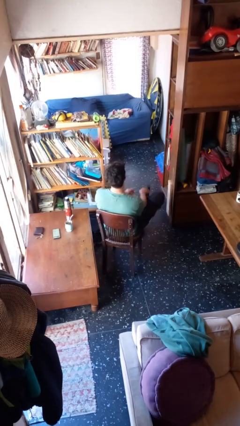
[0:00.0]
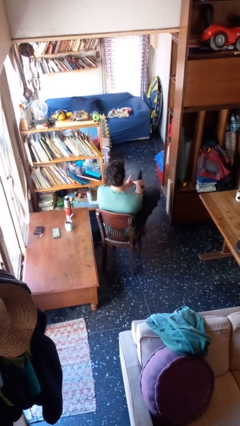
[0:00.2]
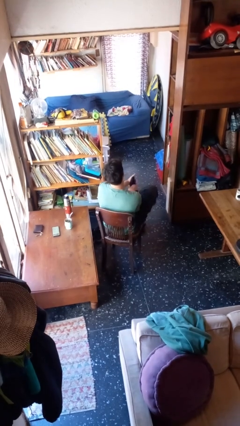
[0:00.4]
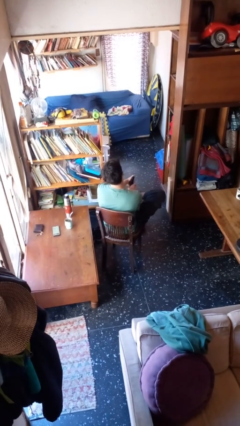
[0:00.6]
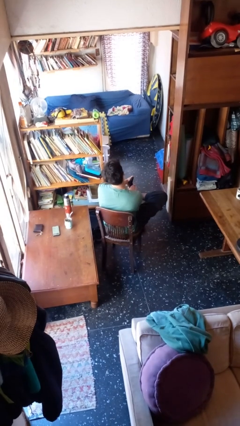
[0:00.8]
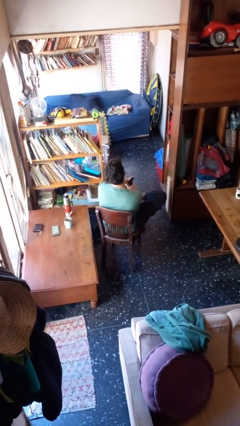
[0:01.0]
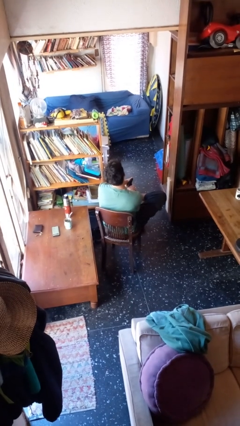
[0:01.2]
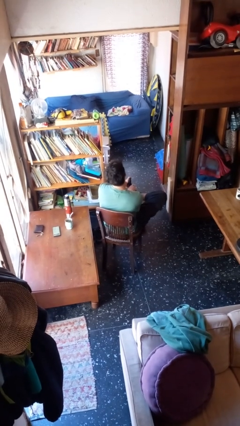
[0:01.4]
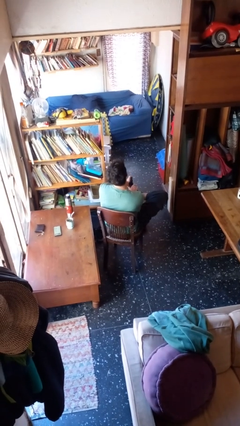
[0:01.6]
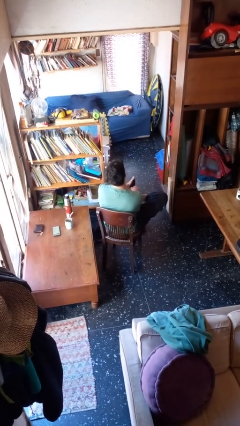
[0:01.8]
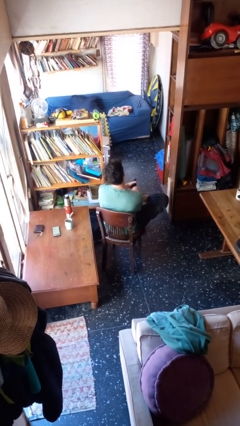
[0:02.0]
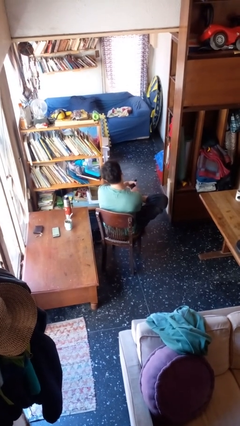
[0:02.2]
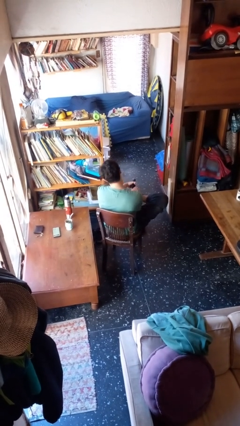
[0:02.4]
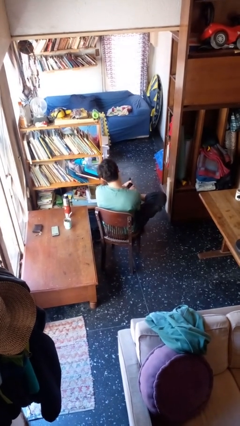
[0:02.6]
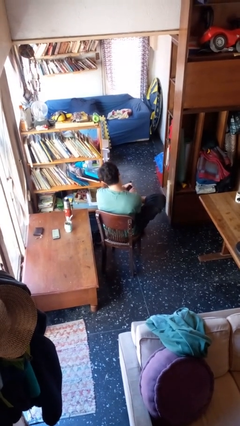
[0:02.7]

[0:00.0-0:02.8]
person rubs foot

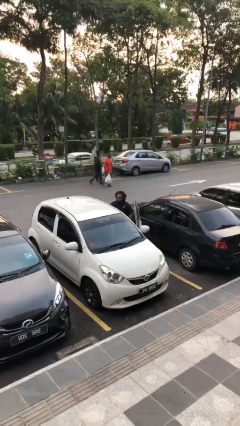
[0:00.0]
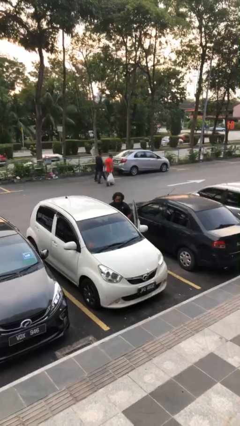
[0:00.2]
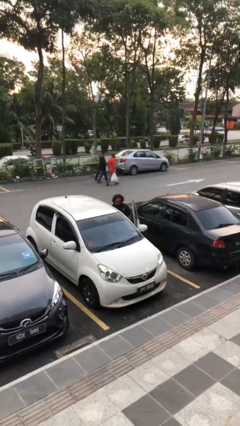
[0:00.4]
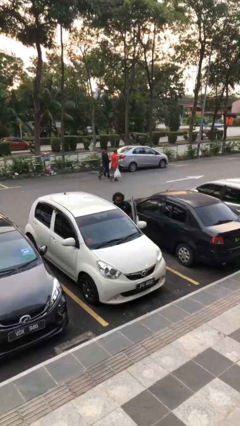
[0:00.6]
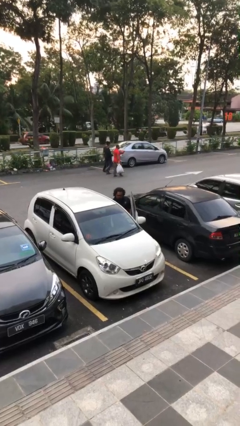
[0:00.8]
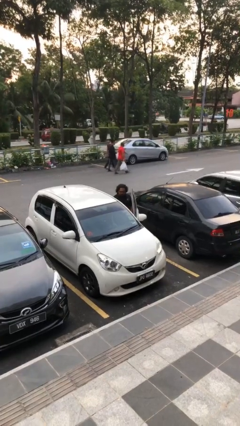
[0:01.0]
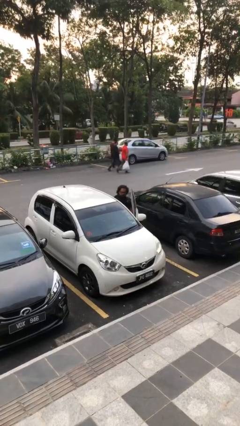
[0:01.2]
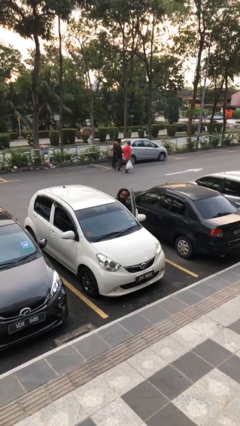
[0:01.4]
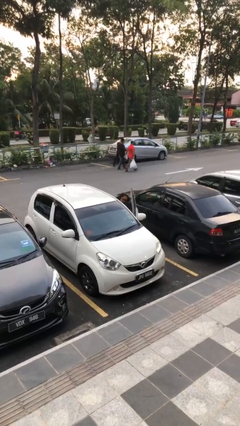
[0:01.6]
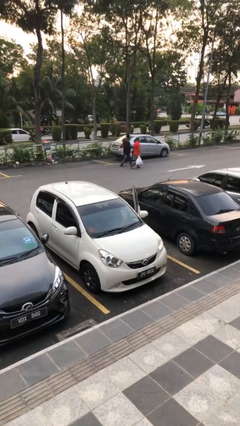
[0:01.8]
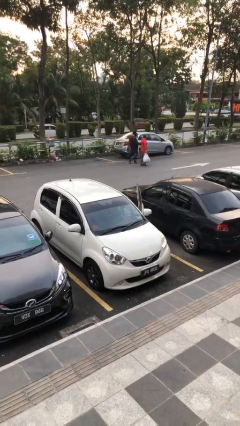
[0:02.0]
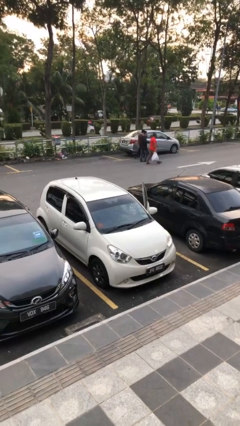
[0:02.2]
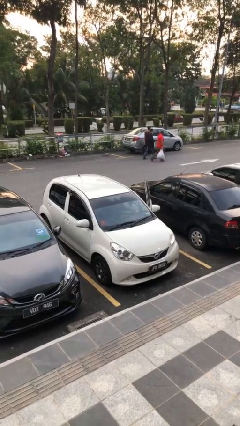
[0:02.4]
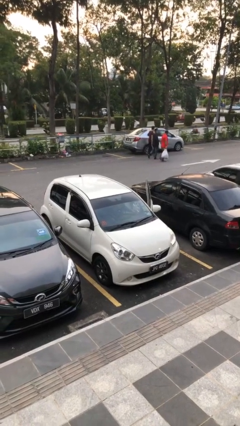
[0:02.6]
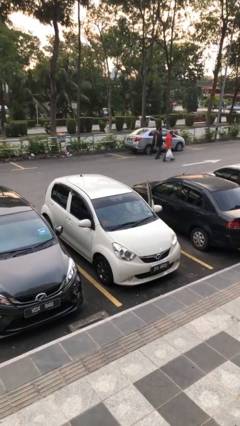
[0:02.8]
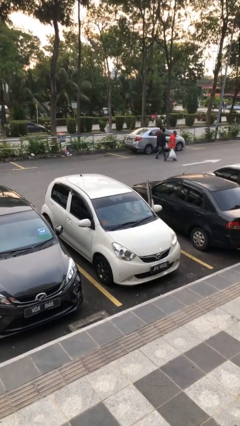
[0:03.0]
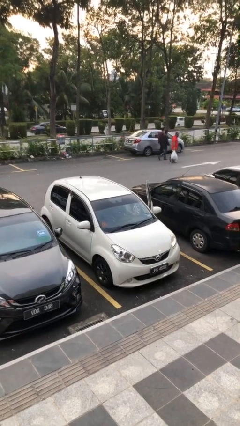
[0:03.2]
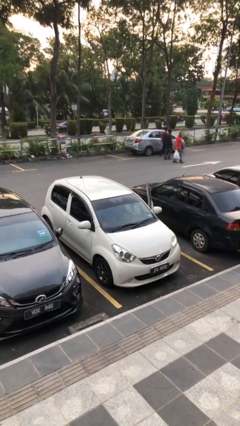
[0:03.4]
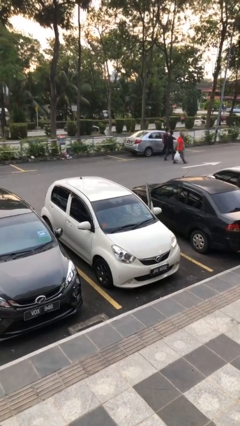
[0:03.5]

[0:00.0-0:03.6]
person enters car

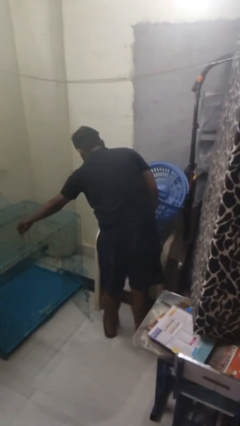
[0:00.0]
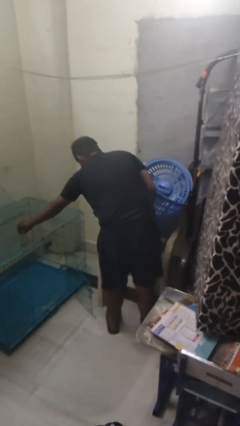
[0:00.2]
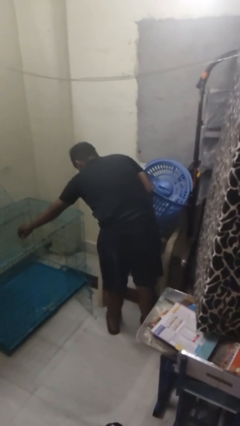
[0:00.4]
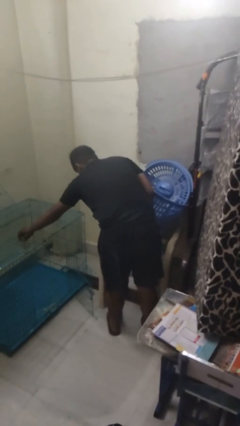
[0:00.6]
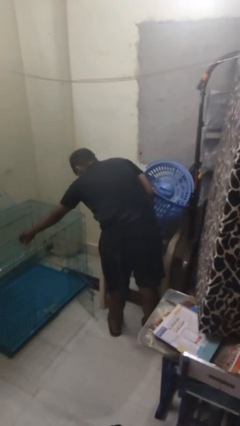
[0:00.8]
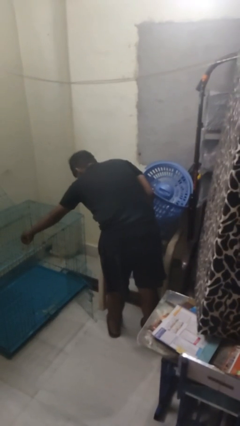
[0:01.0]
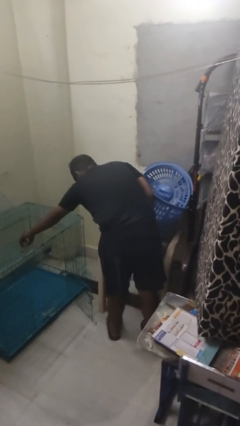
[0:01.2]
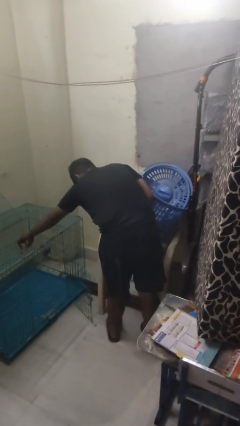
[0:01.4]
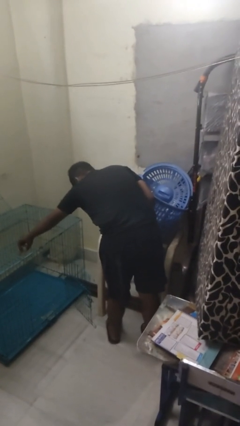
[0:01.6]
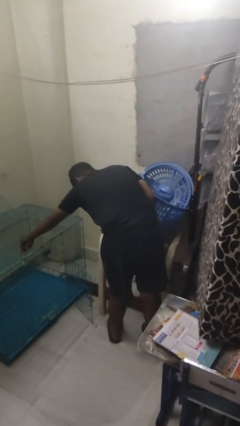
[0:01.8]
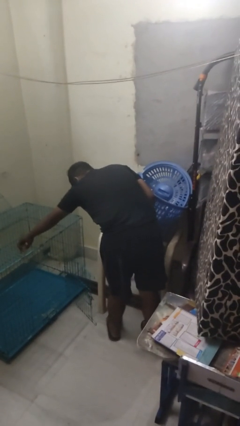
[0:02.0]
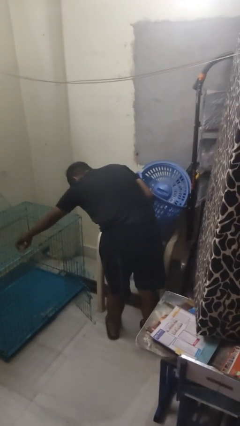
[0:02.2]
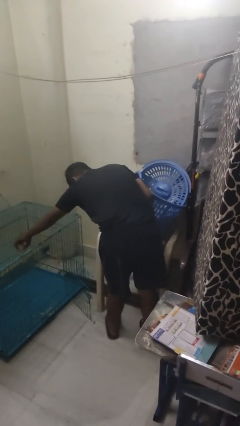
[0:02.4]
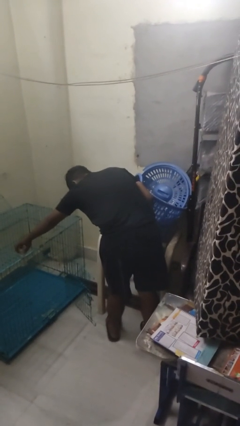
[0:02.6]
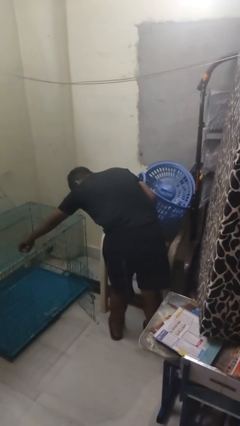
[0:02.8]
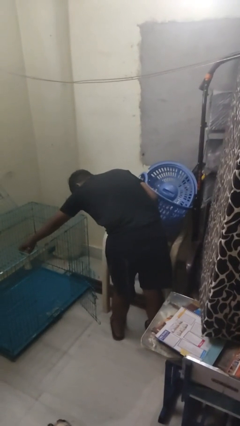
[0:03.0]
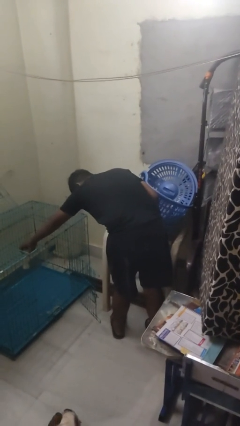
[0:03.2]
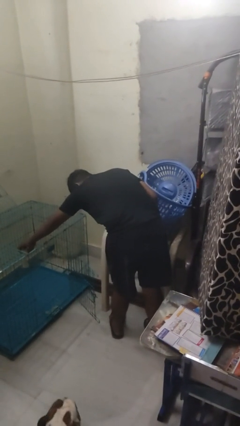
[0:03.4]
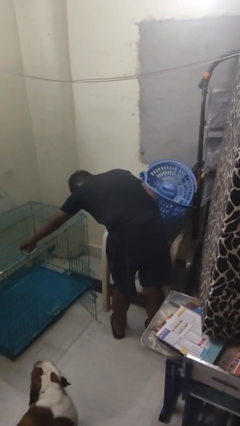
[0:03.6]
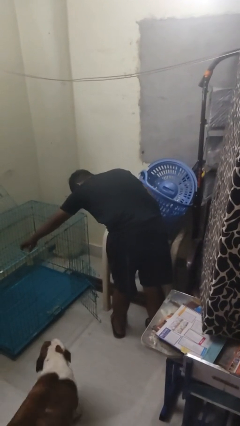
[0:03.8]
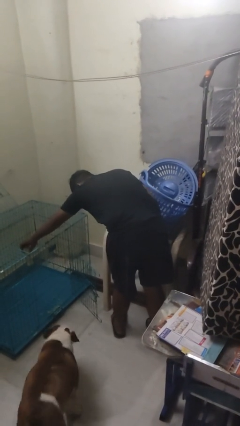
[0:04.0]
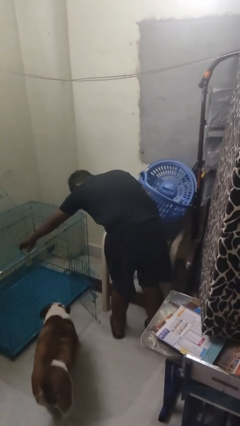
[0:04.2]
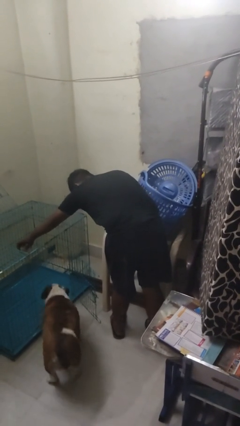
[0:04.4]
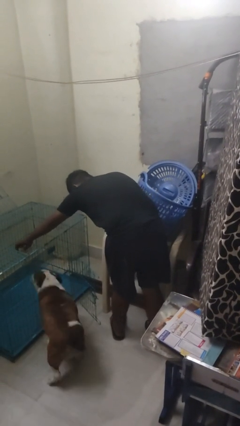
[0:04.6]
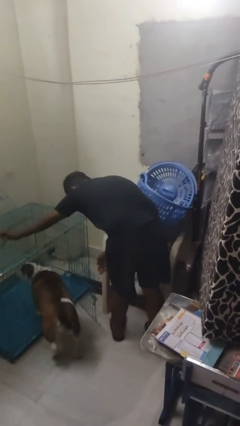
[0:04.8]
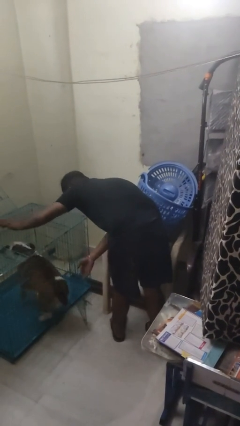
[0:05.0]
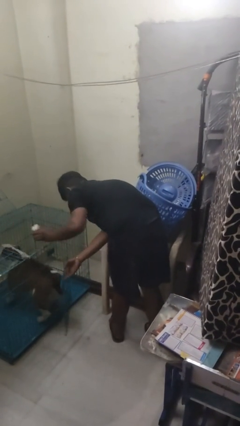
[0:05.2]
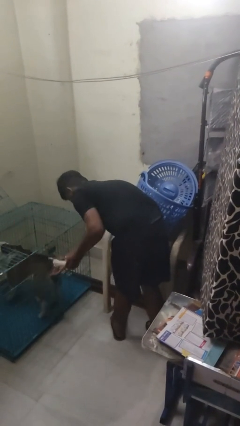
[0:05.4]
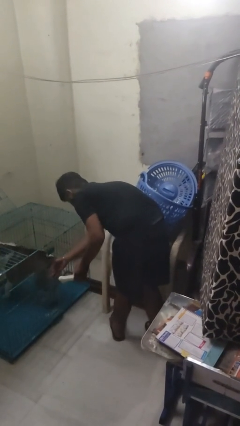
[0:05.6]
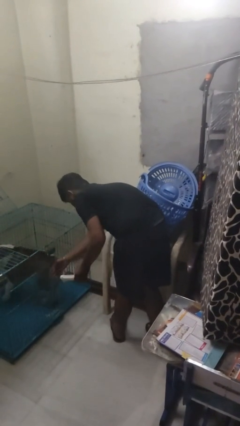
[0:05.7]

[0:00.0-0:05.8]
person crates dog

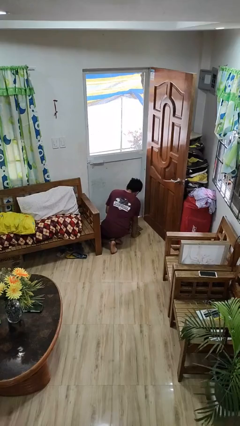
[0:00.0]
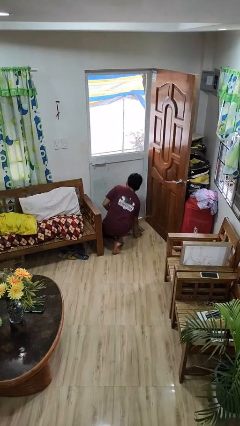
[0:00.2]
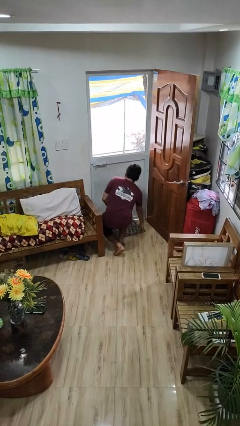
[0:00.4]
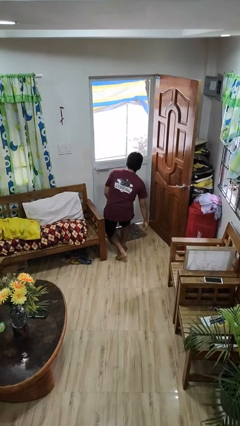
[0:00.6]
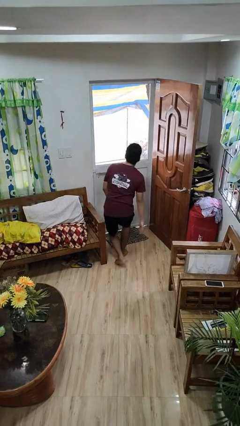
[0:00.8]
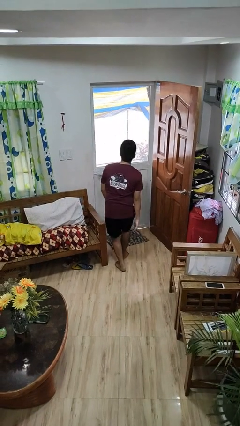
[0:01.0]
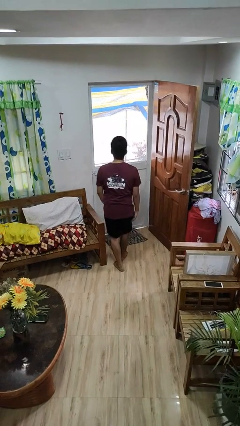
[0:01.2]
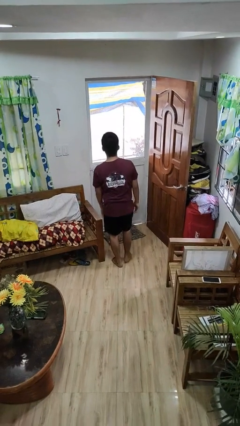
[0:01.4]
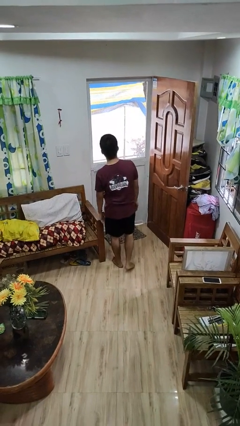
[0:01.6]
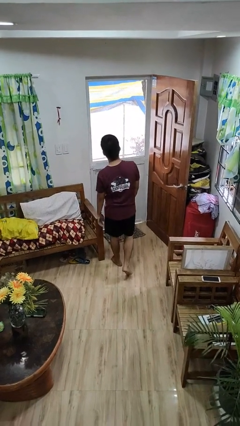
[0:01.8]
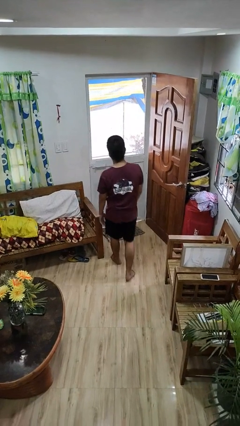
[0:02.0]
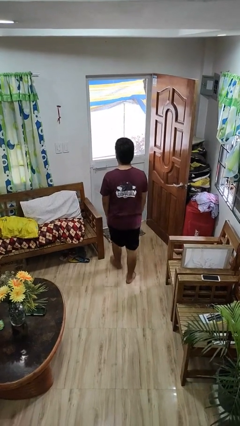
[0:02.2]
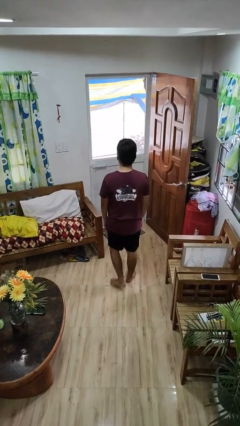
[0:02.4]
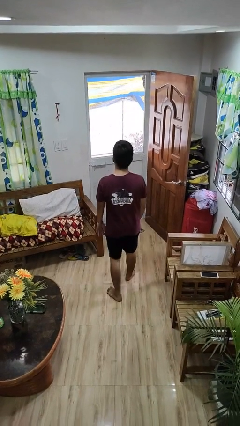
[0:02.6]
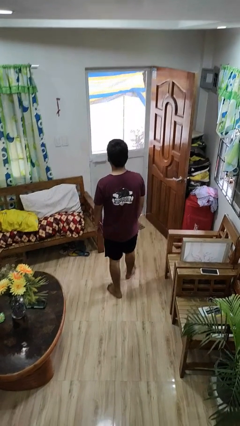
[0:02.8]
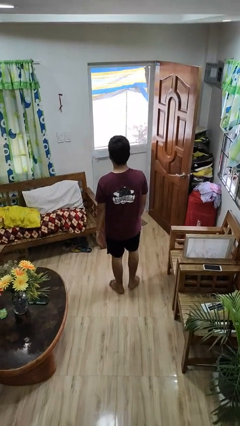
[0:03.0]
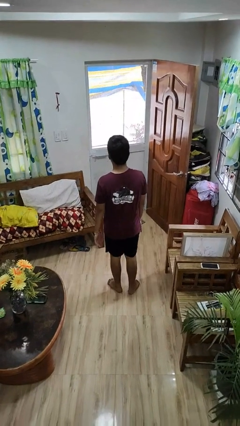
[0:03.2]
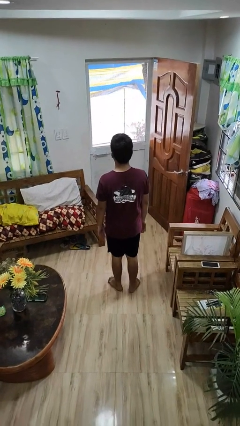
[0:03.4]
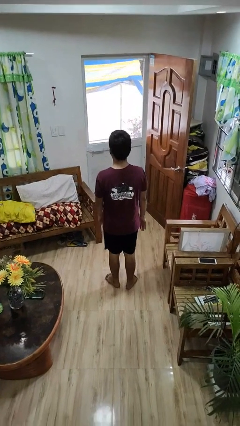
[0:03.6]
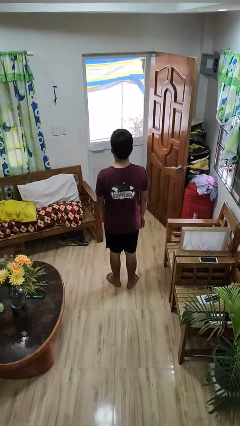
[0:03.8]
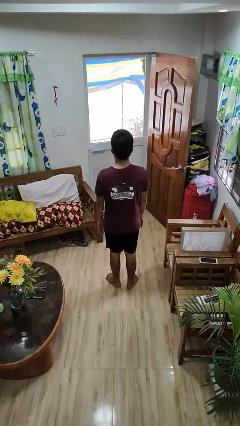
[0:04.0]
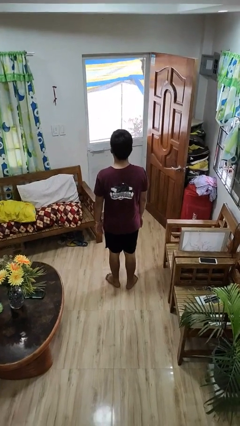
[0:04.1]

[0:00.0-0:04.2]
person stands up from floor

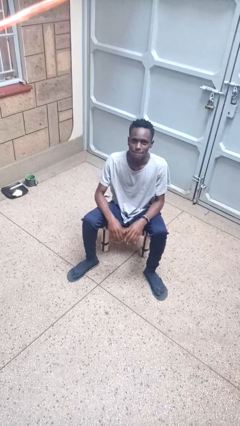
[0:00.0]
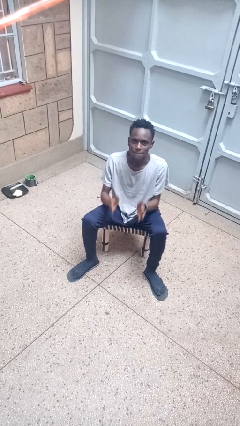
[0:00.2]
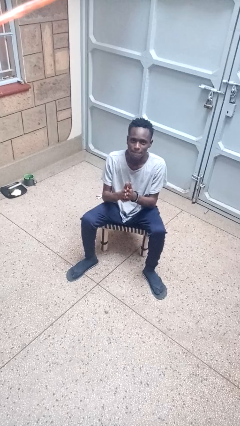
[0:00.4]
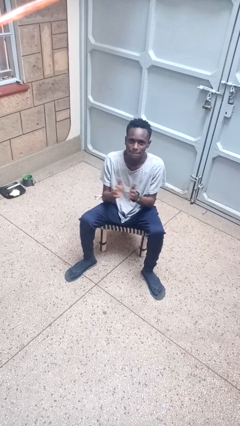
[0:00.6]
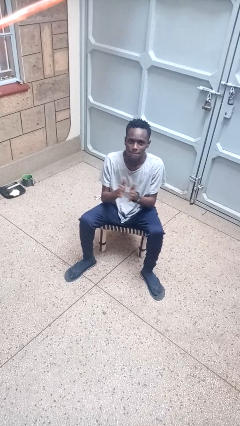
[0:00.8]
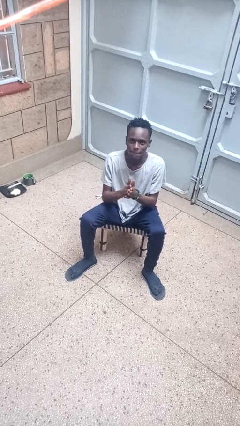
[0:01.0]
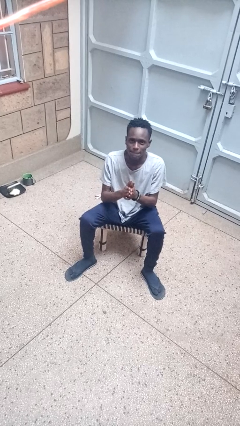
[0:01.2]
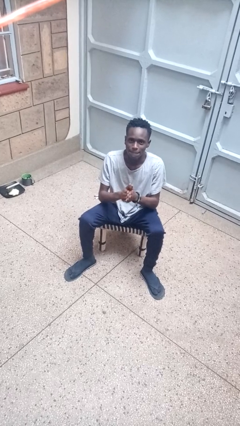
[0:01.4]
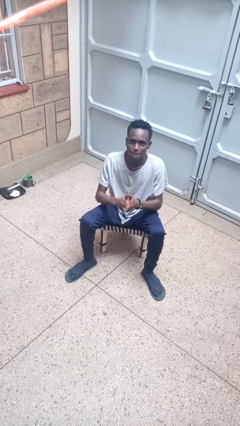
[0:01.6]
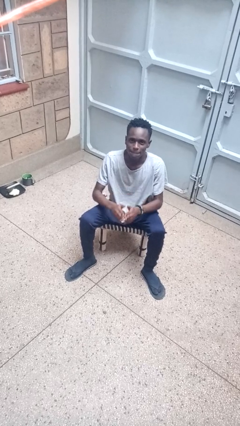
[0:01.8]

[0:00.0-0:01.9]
person claps hands
